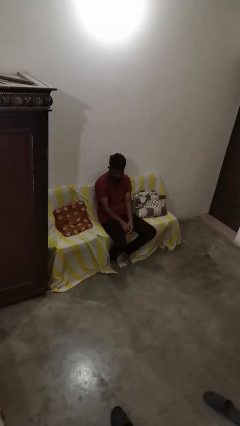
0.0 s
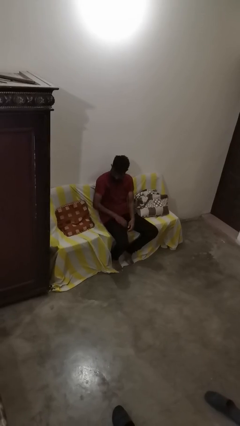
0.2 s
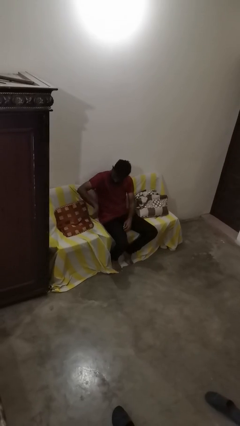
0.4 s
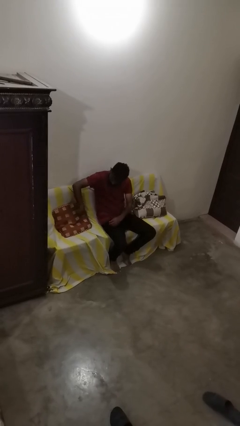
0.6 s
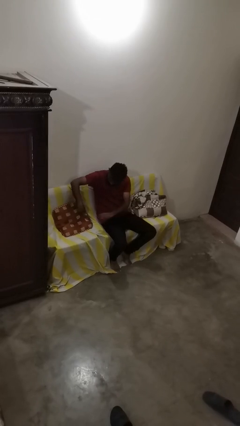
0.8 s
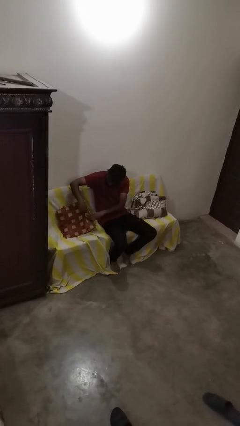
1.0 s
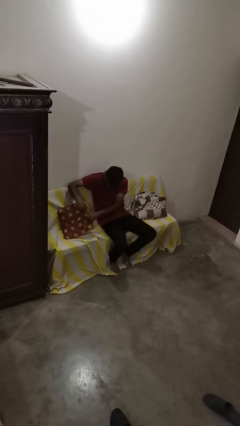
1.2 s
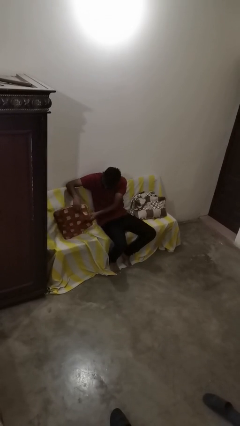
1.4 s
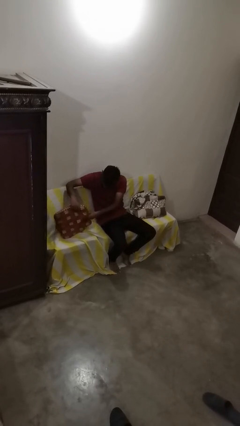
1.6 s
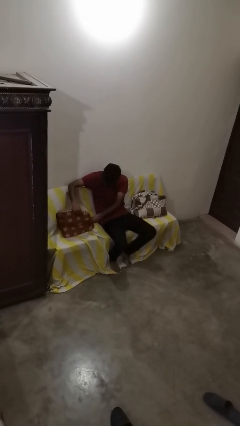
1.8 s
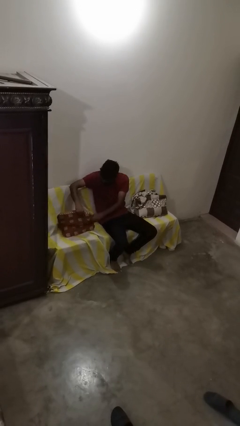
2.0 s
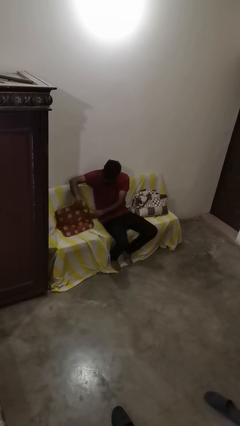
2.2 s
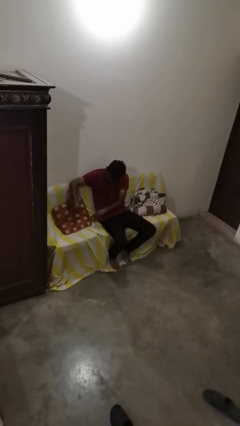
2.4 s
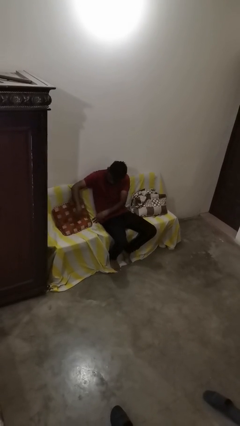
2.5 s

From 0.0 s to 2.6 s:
person searches in couch

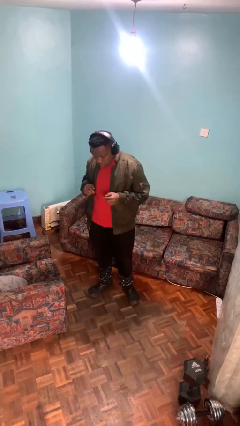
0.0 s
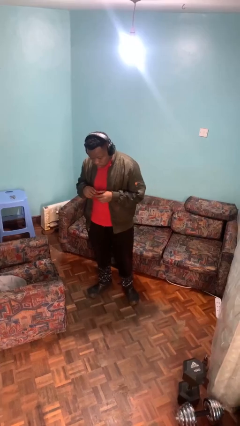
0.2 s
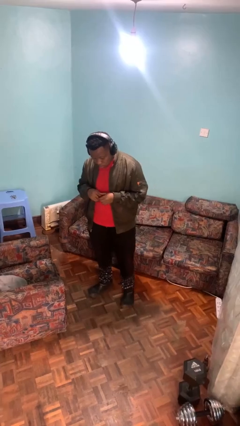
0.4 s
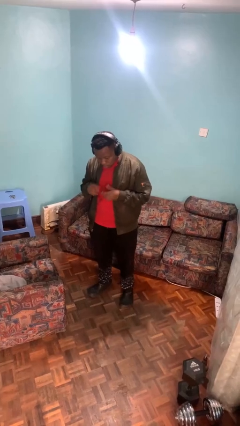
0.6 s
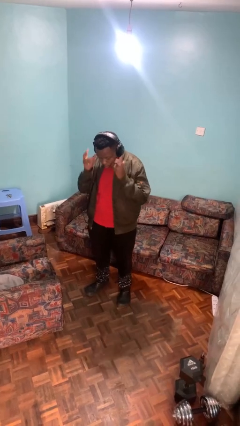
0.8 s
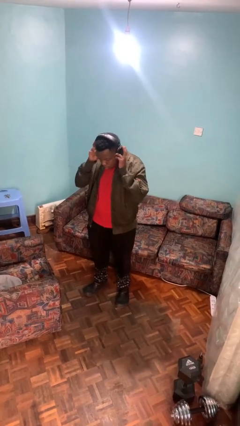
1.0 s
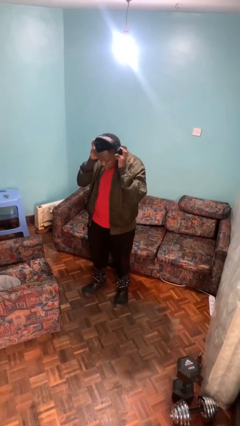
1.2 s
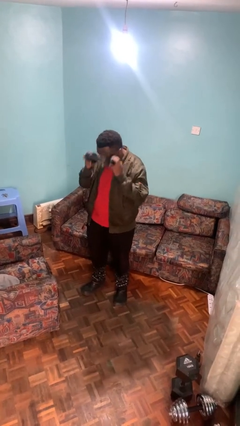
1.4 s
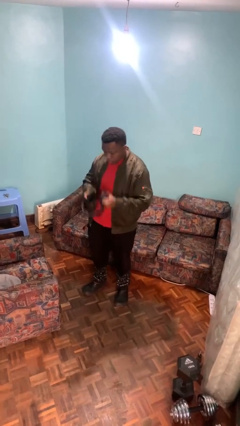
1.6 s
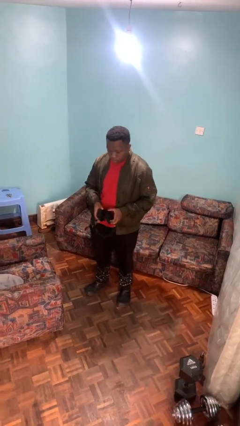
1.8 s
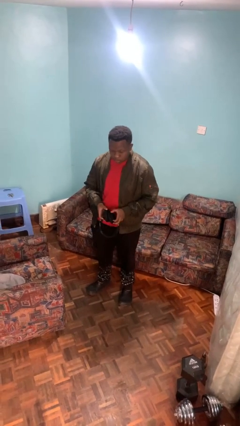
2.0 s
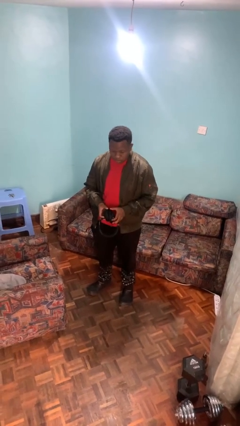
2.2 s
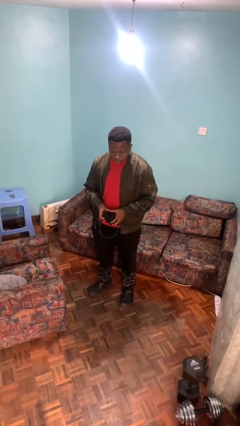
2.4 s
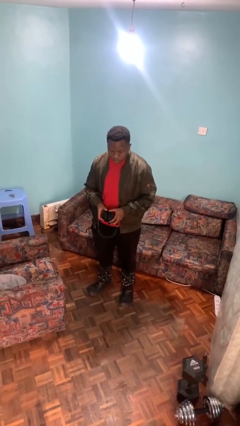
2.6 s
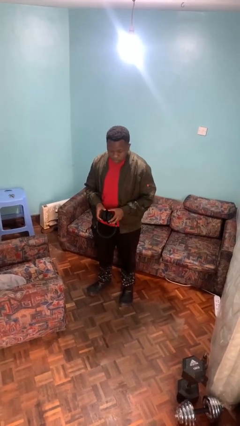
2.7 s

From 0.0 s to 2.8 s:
person takes off headphones

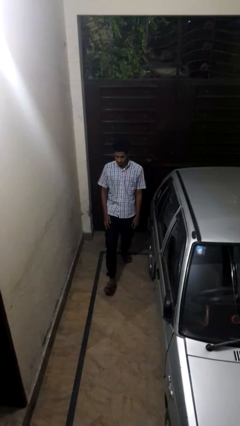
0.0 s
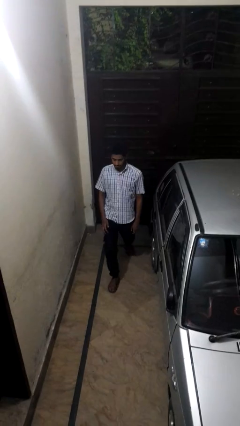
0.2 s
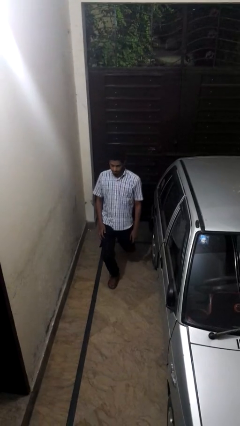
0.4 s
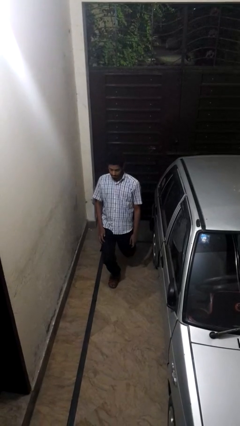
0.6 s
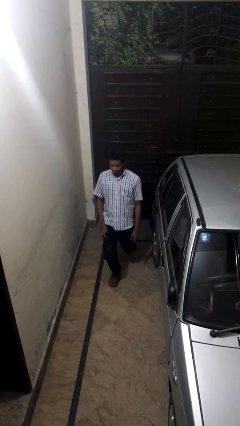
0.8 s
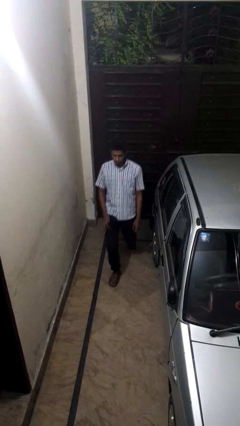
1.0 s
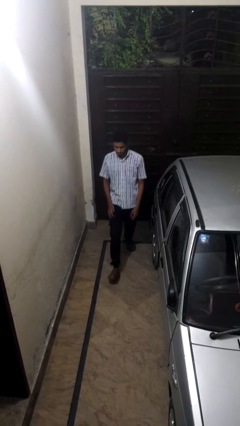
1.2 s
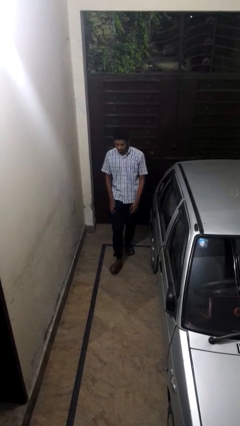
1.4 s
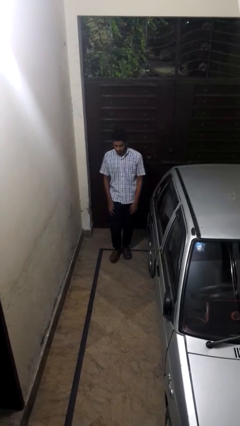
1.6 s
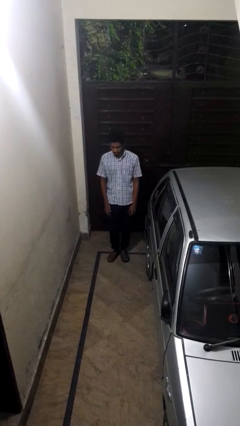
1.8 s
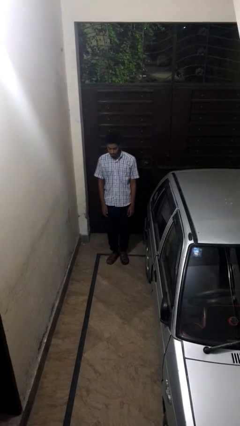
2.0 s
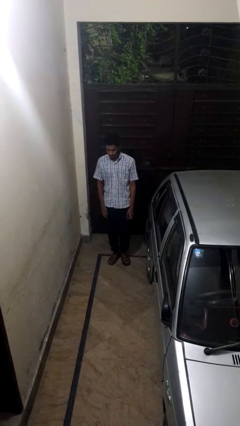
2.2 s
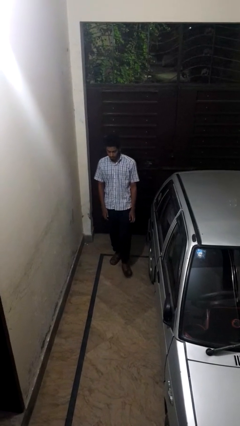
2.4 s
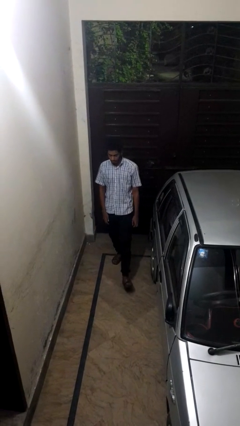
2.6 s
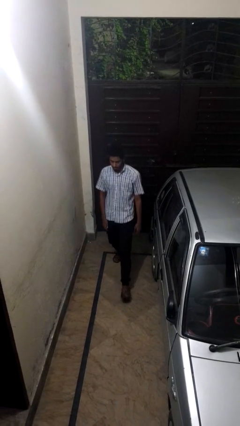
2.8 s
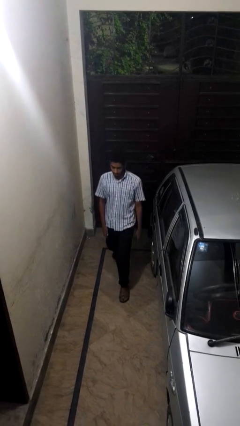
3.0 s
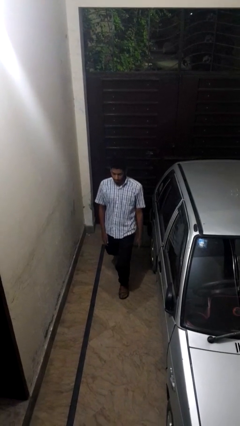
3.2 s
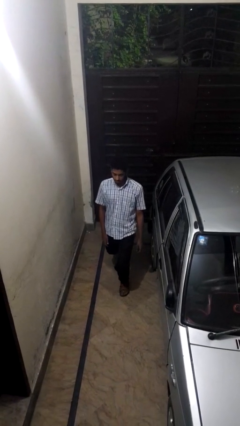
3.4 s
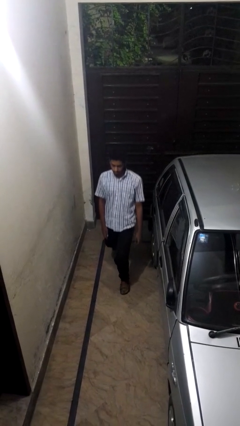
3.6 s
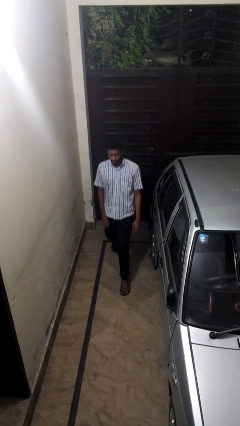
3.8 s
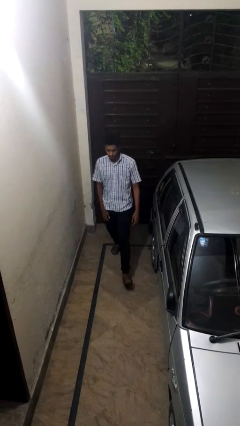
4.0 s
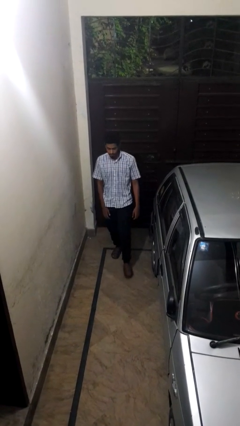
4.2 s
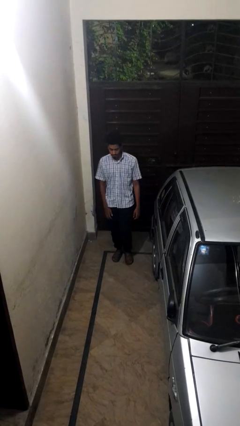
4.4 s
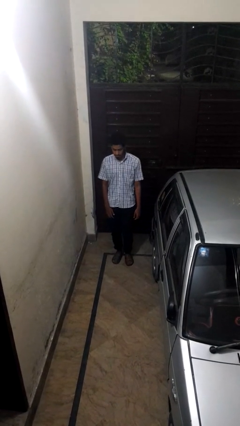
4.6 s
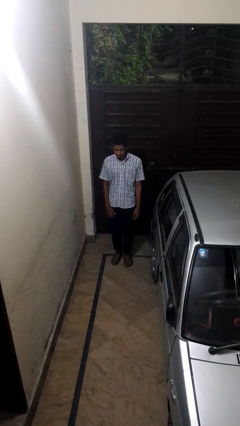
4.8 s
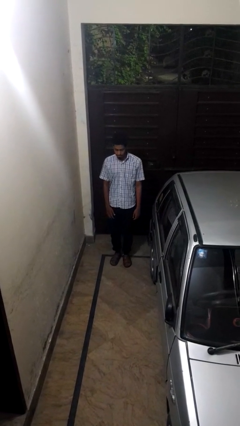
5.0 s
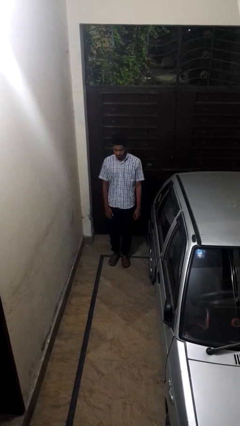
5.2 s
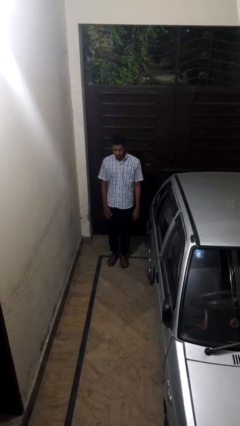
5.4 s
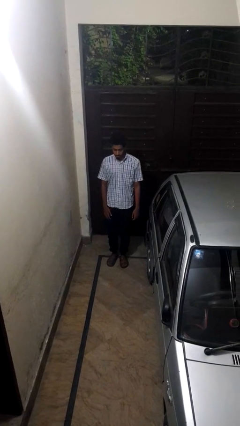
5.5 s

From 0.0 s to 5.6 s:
person exercises with lunges

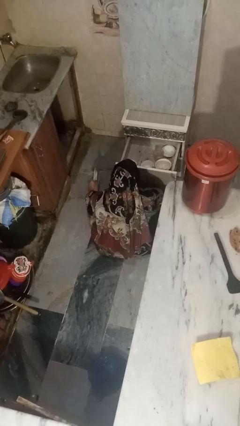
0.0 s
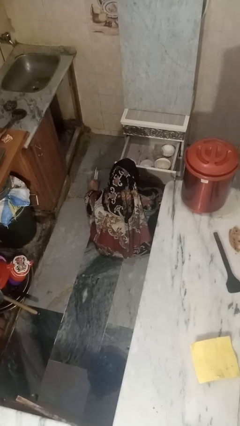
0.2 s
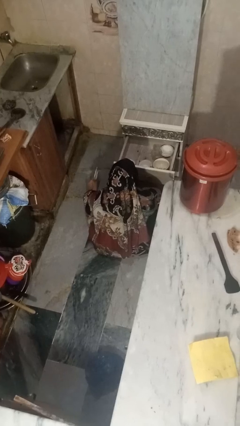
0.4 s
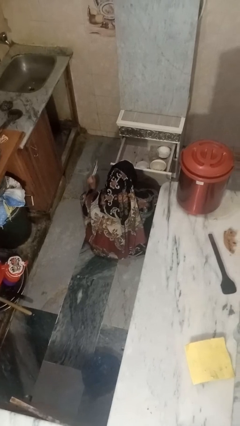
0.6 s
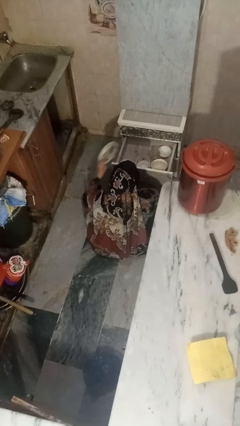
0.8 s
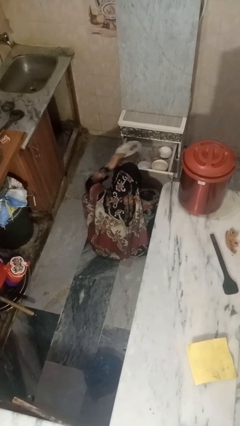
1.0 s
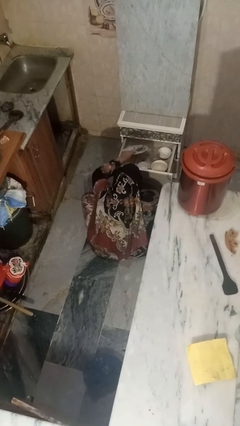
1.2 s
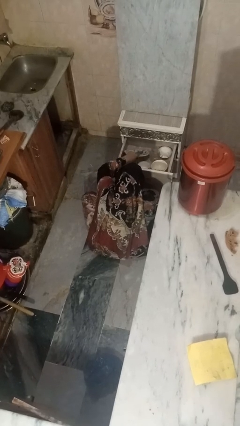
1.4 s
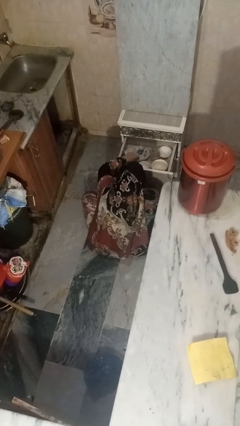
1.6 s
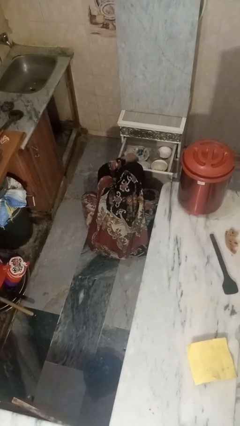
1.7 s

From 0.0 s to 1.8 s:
person puts object into kitchen drawer

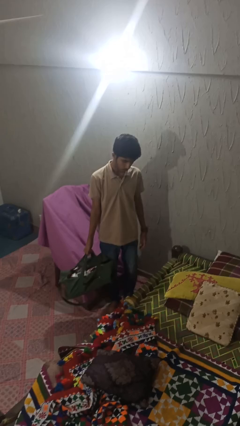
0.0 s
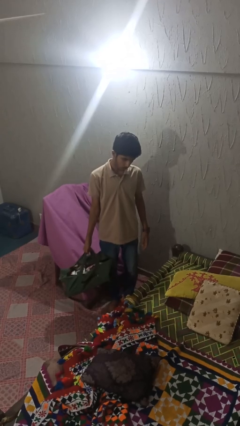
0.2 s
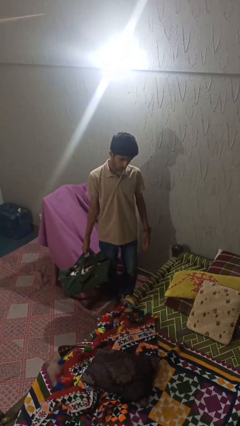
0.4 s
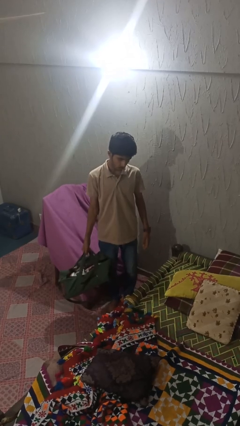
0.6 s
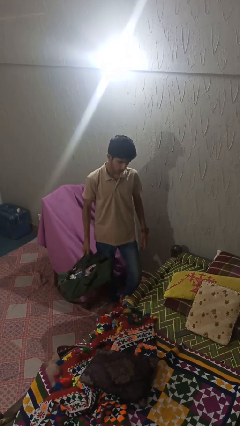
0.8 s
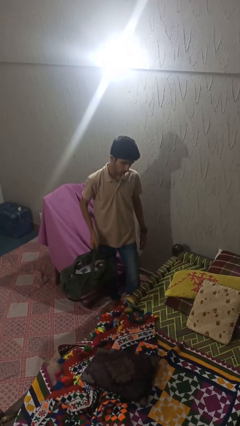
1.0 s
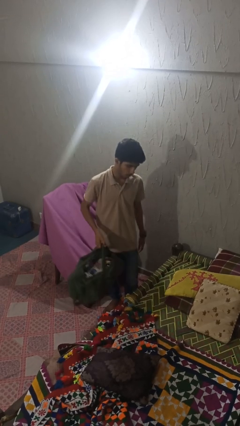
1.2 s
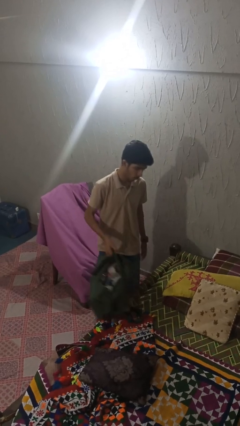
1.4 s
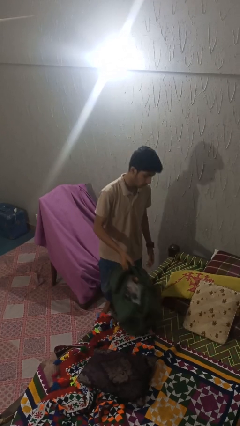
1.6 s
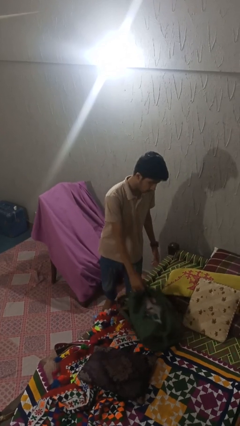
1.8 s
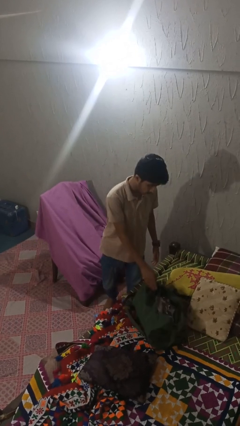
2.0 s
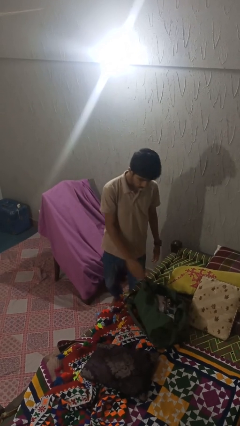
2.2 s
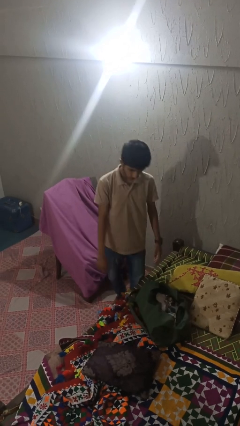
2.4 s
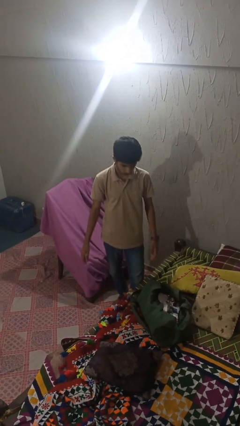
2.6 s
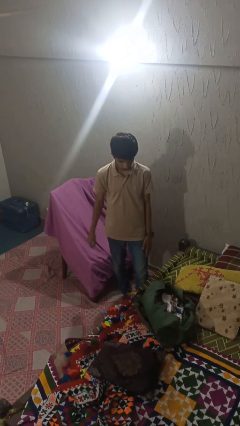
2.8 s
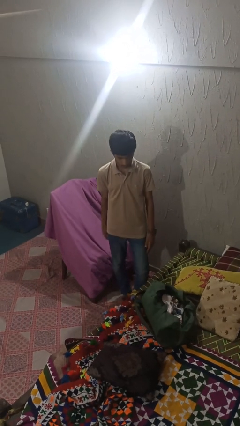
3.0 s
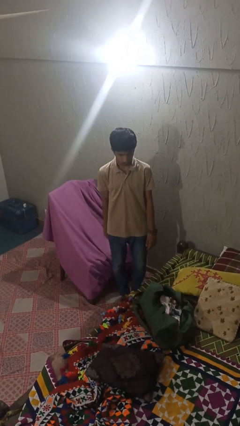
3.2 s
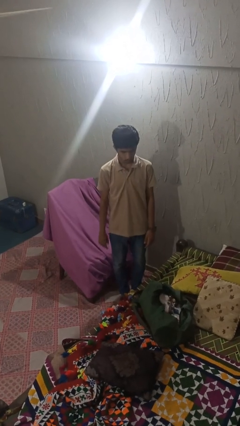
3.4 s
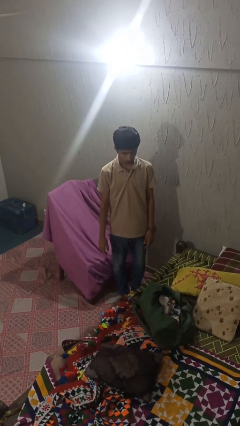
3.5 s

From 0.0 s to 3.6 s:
person puts down object on bed

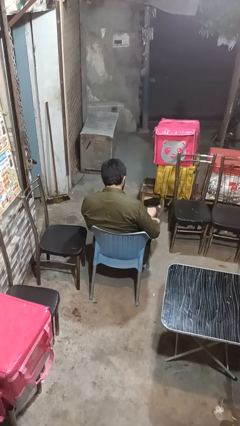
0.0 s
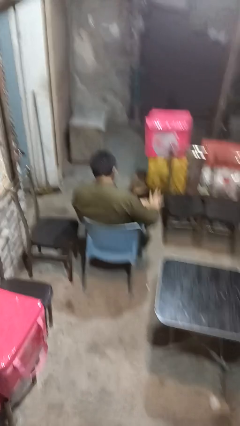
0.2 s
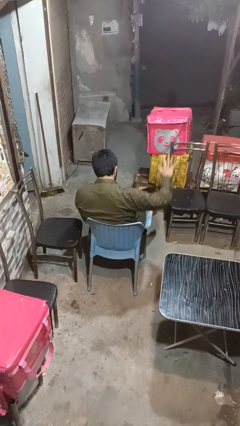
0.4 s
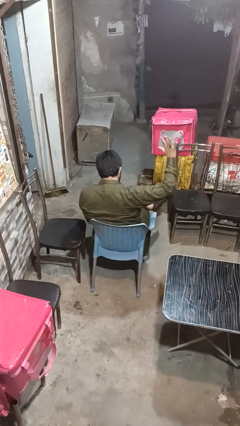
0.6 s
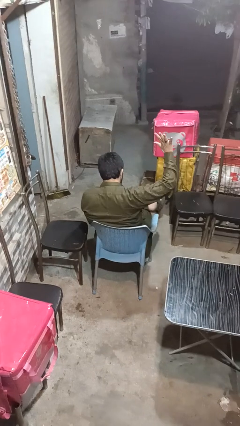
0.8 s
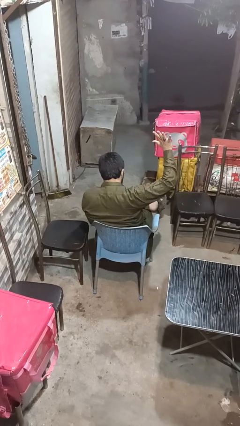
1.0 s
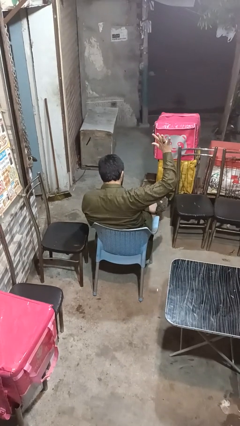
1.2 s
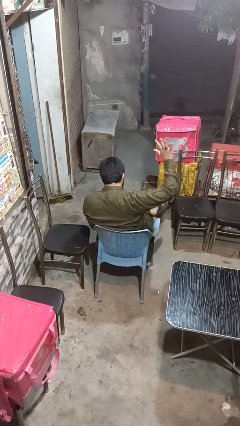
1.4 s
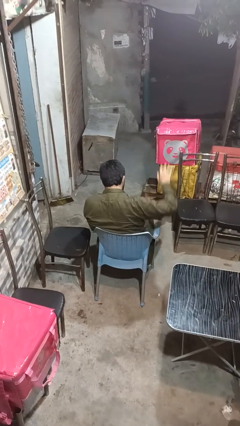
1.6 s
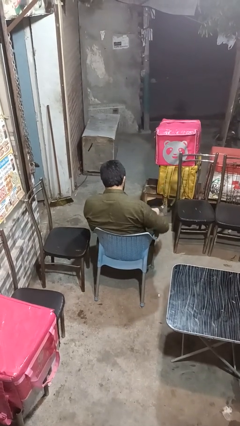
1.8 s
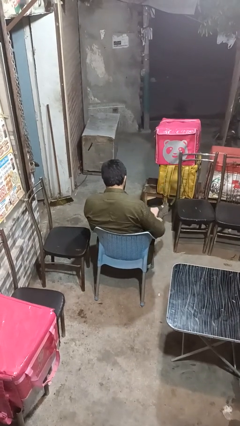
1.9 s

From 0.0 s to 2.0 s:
person gestures number five
